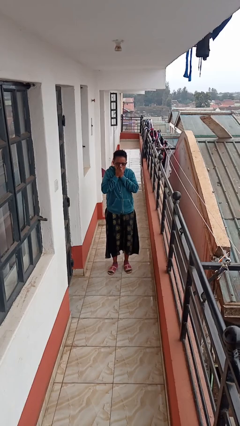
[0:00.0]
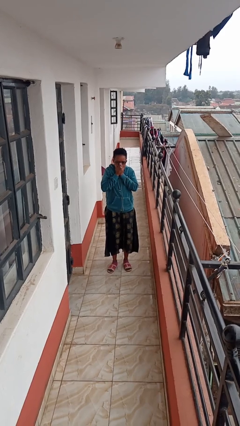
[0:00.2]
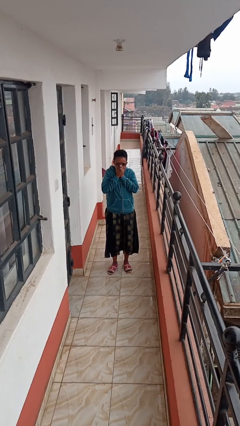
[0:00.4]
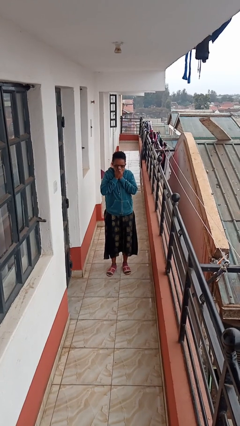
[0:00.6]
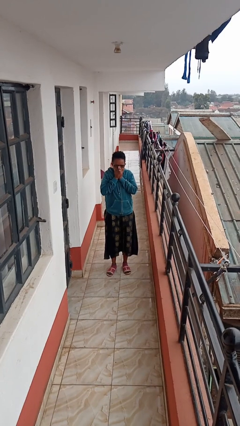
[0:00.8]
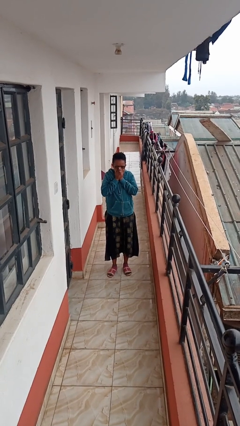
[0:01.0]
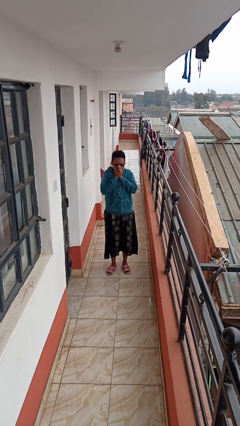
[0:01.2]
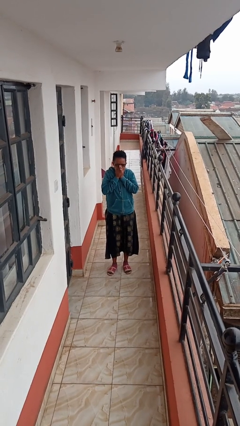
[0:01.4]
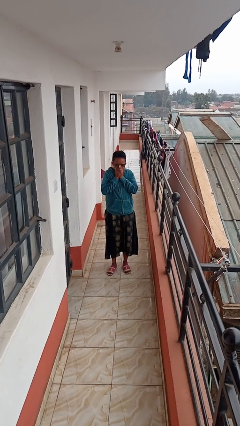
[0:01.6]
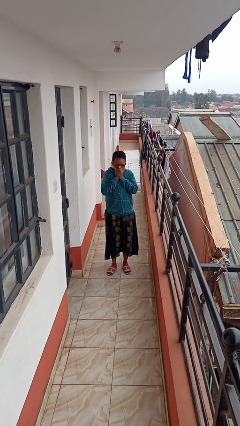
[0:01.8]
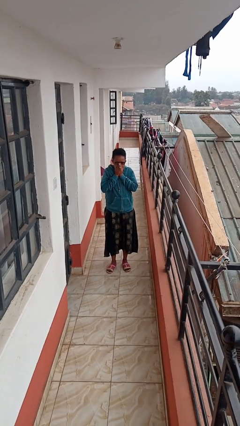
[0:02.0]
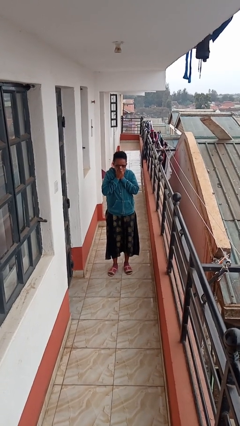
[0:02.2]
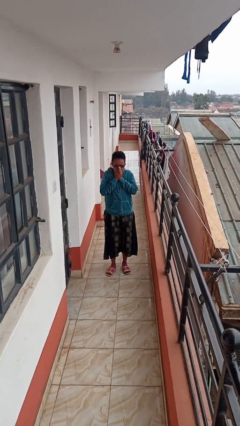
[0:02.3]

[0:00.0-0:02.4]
person blows into hands

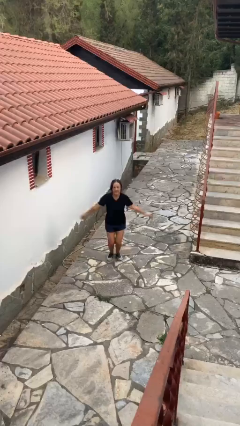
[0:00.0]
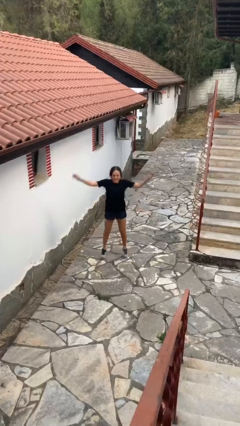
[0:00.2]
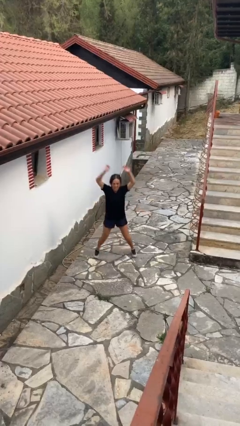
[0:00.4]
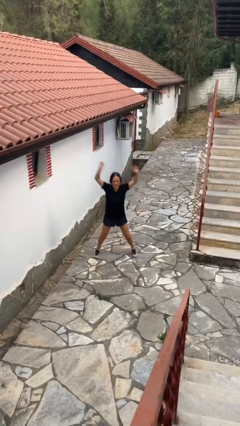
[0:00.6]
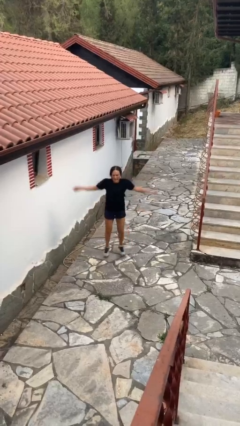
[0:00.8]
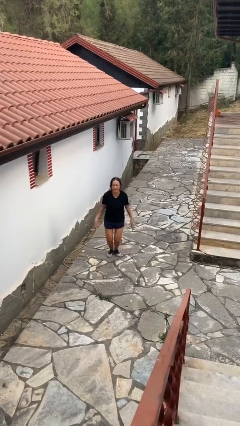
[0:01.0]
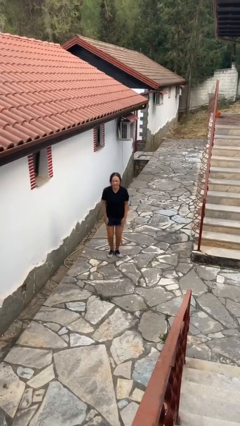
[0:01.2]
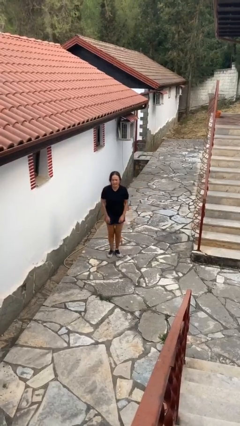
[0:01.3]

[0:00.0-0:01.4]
person exercises with jumping jacks

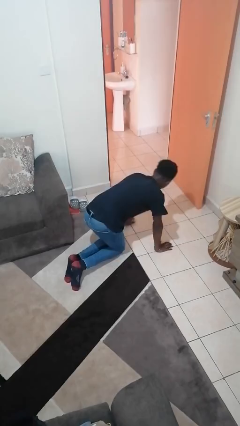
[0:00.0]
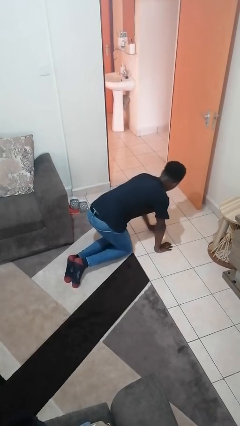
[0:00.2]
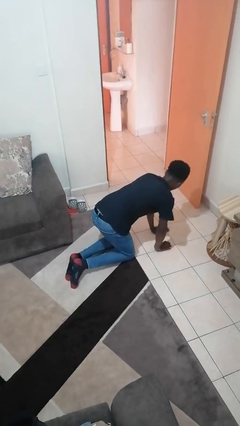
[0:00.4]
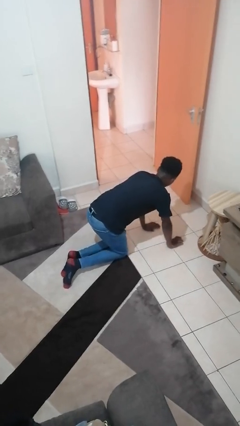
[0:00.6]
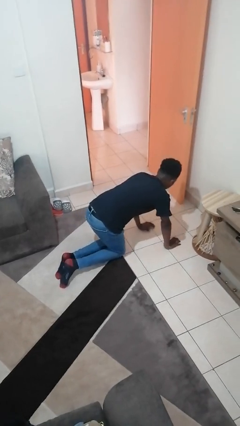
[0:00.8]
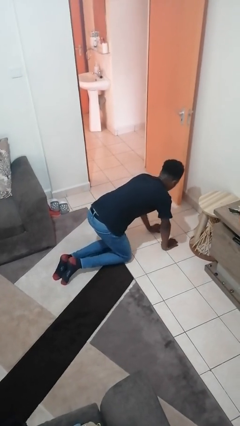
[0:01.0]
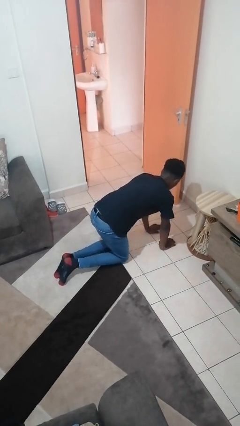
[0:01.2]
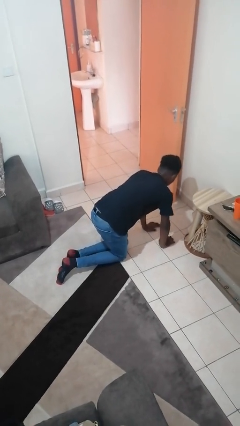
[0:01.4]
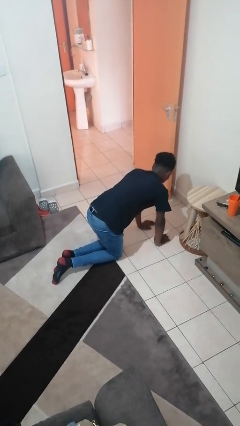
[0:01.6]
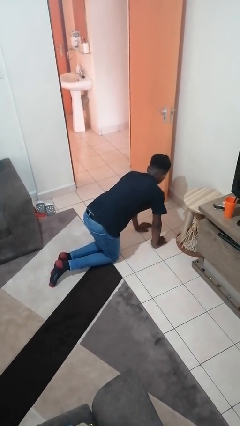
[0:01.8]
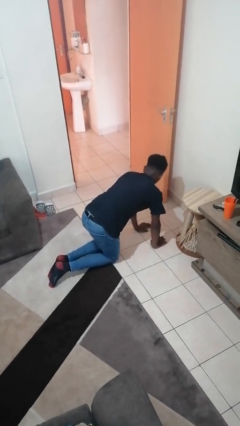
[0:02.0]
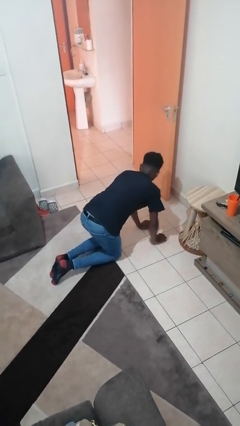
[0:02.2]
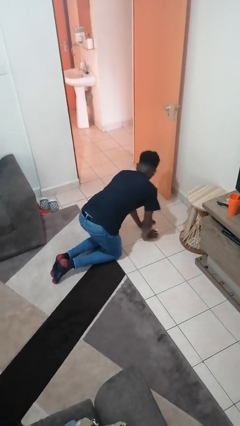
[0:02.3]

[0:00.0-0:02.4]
person crawls

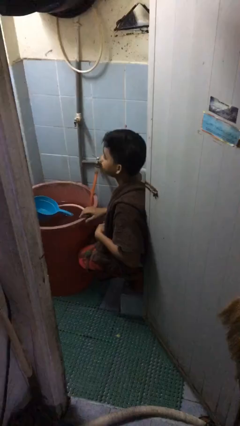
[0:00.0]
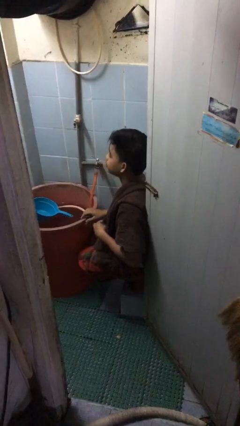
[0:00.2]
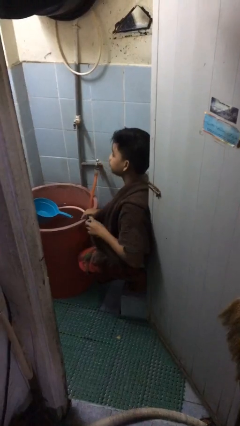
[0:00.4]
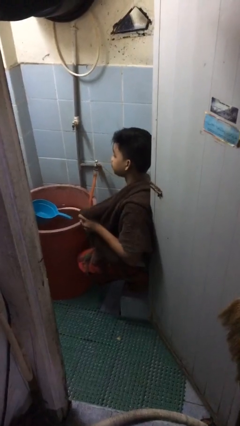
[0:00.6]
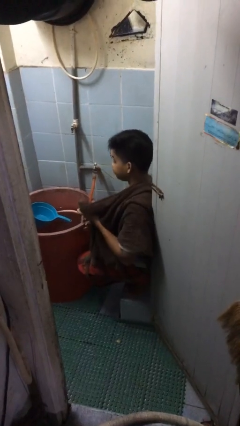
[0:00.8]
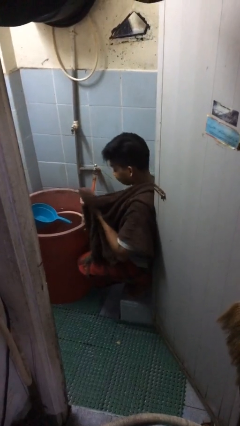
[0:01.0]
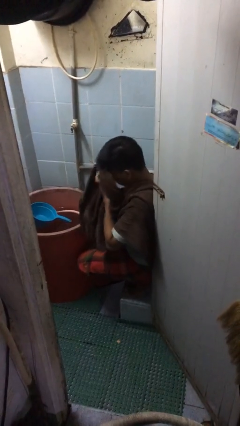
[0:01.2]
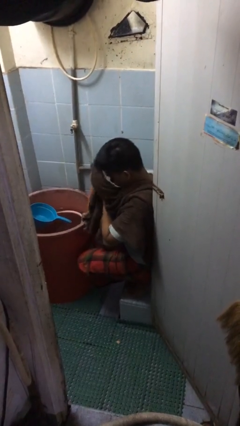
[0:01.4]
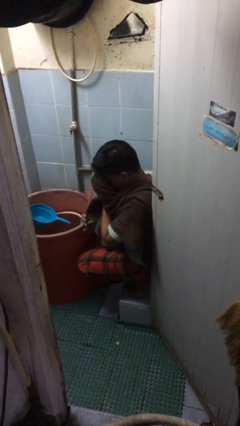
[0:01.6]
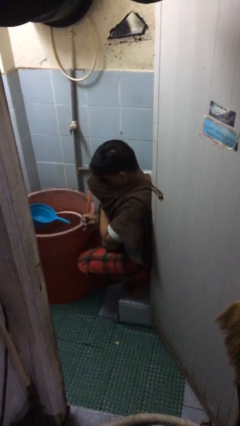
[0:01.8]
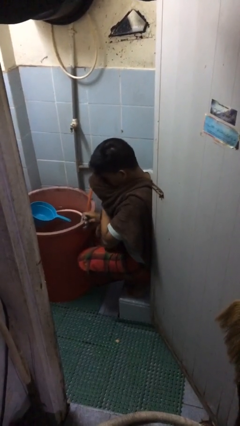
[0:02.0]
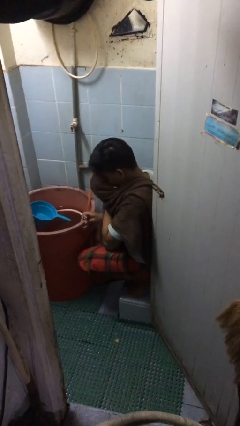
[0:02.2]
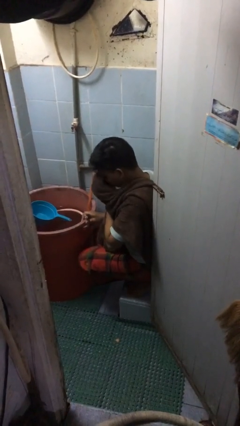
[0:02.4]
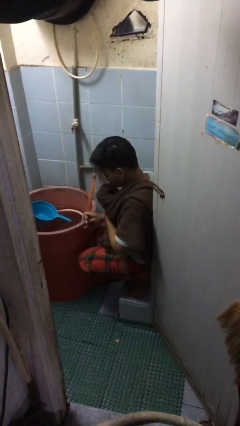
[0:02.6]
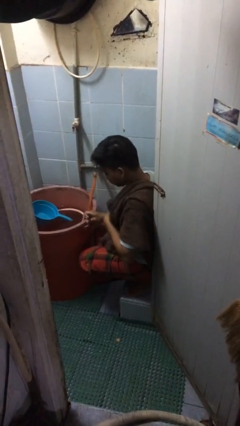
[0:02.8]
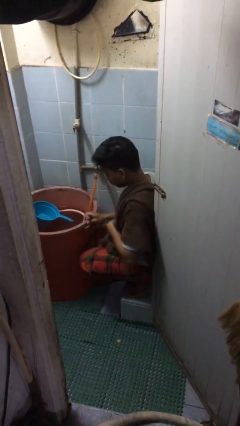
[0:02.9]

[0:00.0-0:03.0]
person dries face with towel

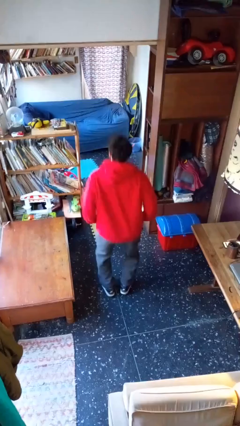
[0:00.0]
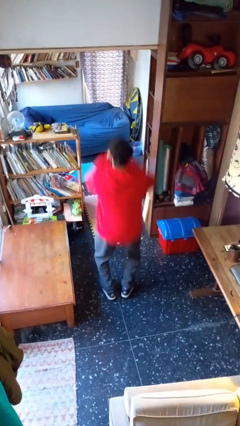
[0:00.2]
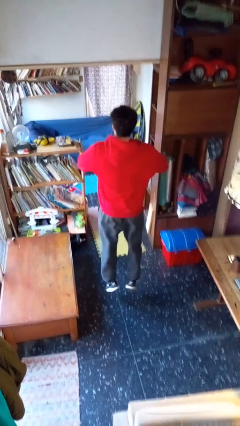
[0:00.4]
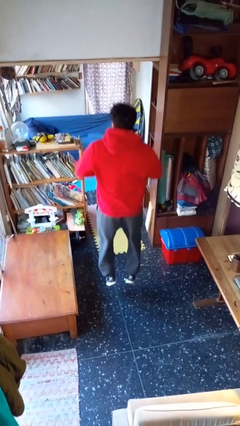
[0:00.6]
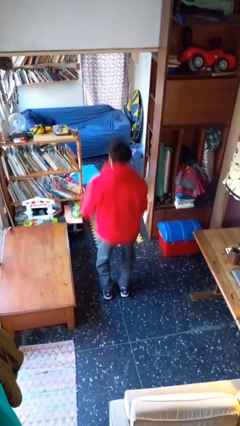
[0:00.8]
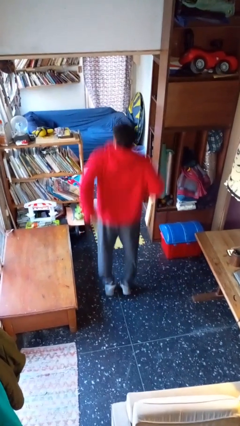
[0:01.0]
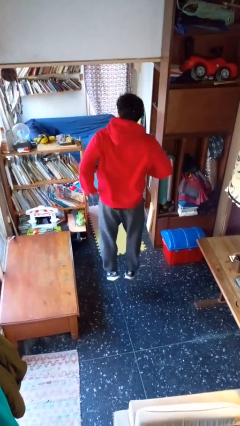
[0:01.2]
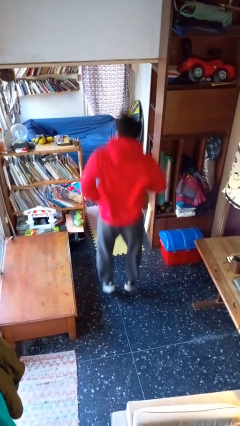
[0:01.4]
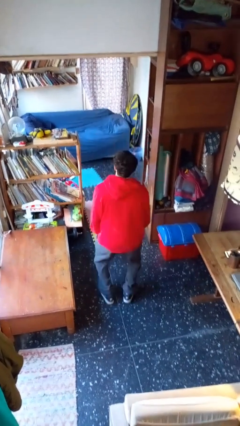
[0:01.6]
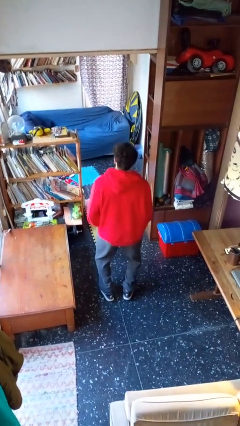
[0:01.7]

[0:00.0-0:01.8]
person jumps

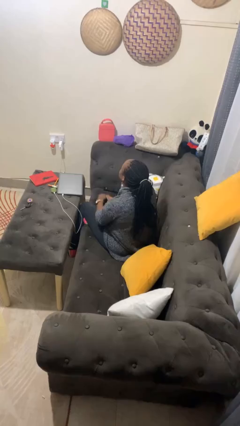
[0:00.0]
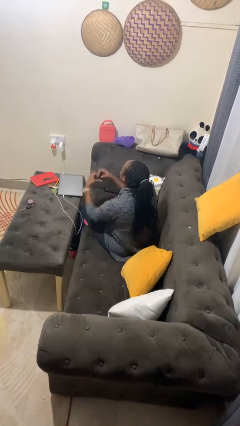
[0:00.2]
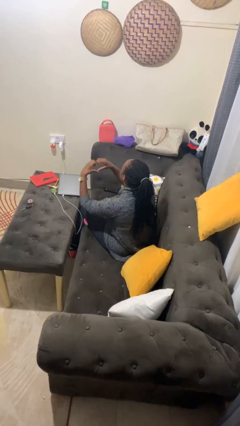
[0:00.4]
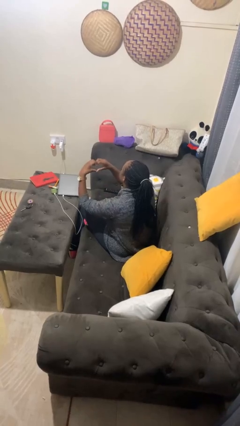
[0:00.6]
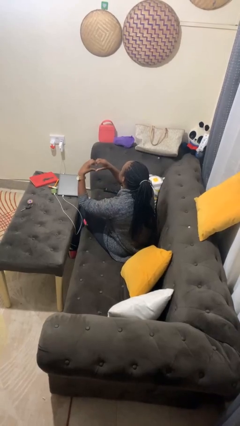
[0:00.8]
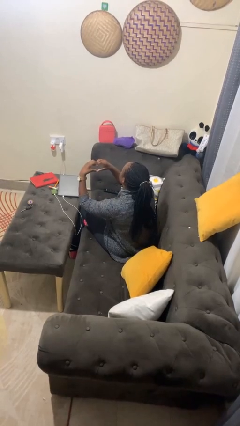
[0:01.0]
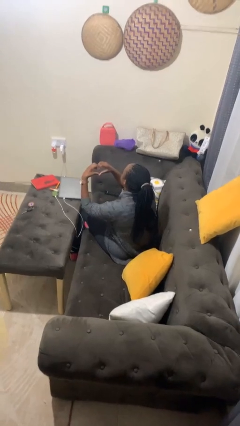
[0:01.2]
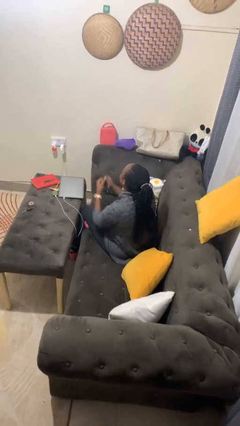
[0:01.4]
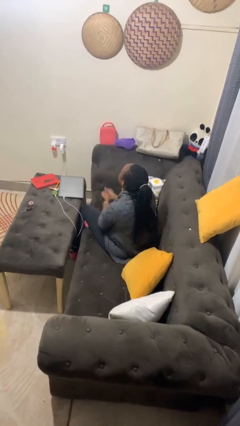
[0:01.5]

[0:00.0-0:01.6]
person gestures heart

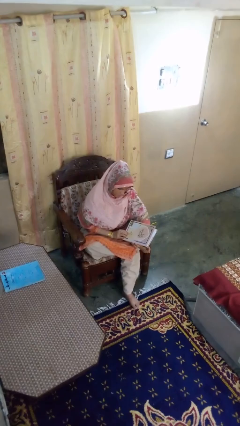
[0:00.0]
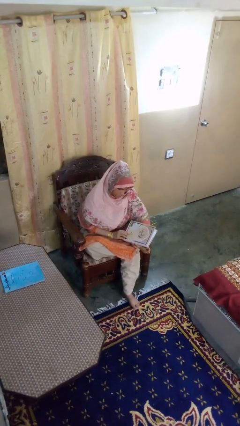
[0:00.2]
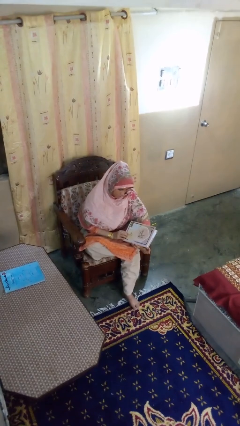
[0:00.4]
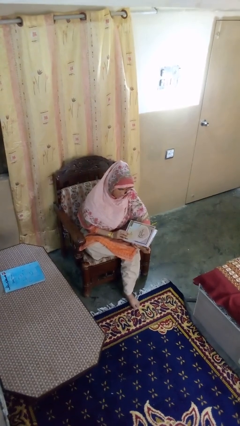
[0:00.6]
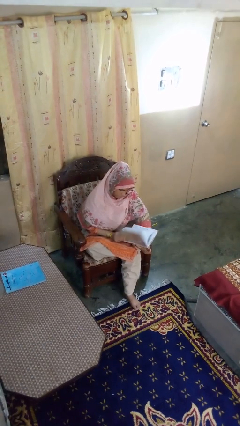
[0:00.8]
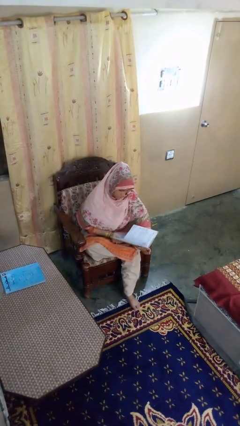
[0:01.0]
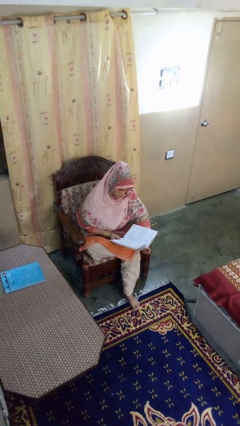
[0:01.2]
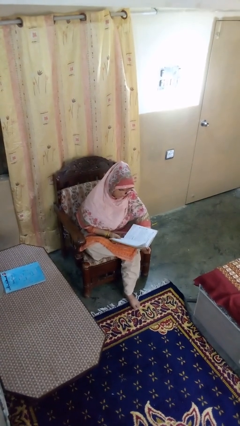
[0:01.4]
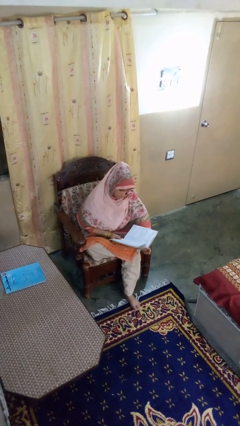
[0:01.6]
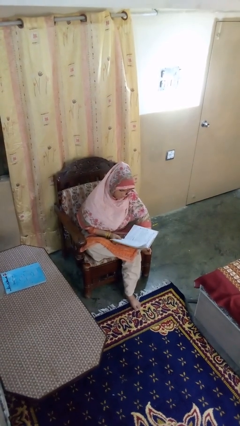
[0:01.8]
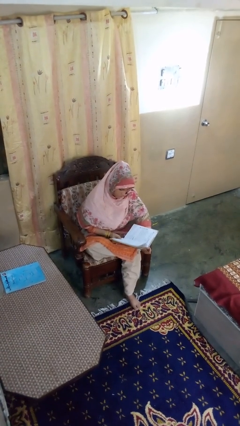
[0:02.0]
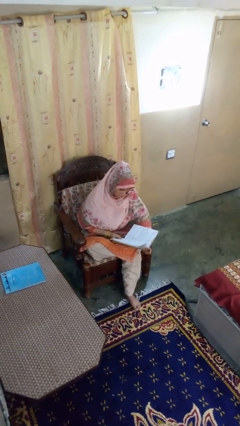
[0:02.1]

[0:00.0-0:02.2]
person reads book

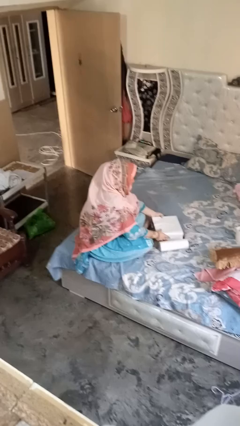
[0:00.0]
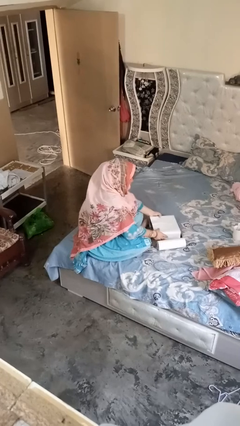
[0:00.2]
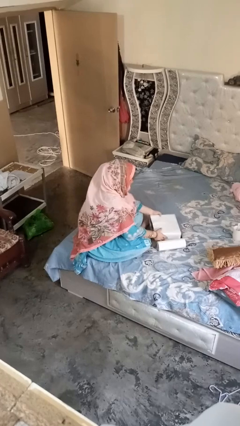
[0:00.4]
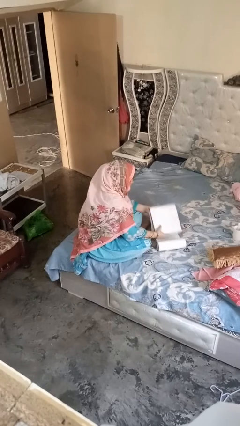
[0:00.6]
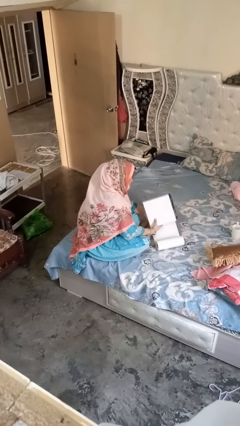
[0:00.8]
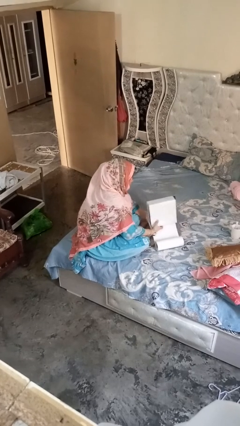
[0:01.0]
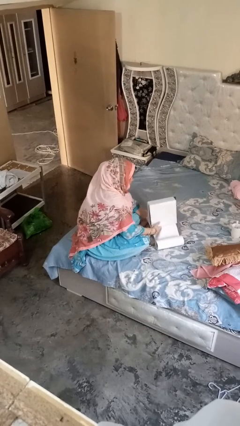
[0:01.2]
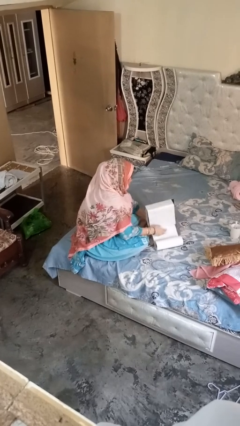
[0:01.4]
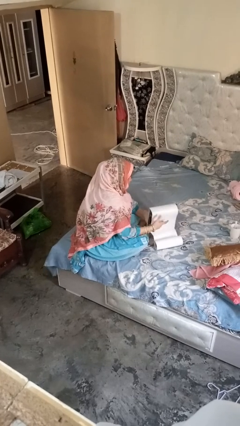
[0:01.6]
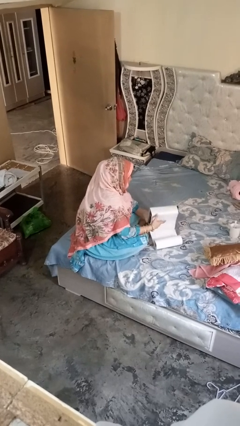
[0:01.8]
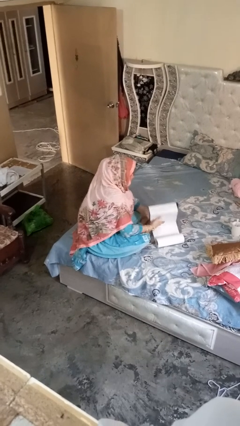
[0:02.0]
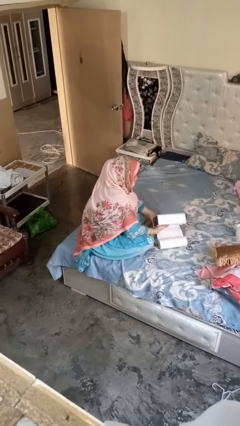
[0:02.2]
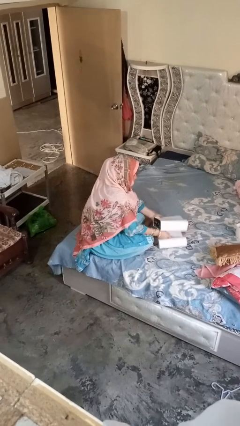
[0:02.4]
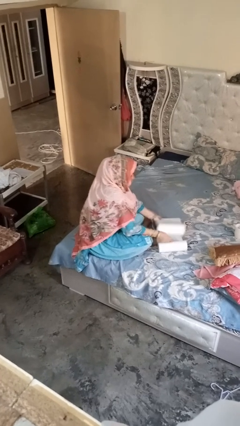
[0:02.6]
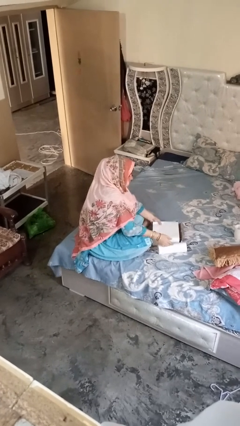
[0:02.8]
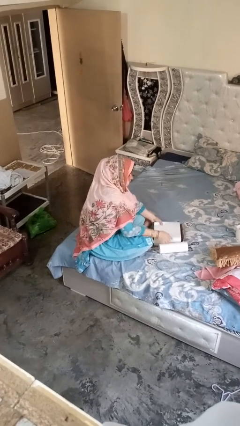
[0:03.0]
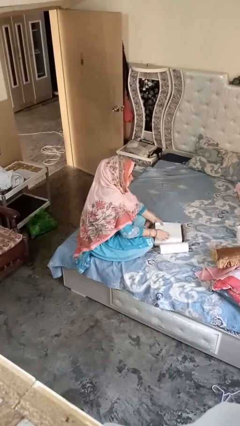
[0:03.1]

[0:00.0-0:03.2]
person wraps box
